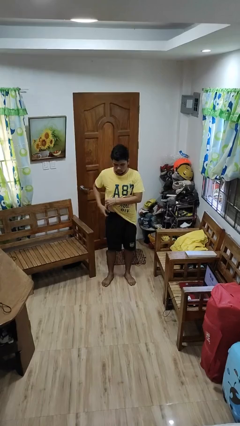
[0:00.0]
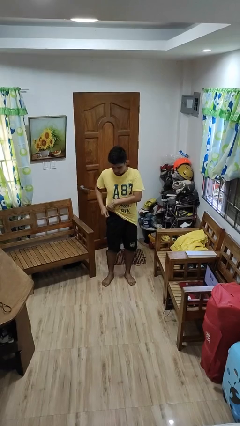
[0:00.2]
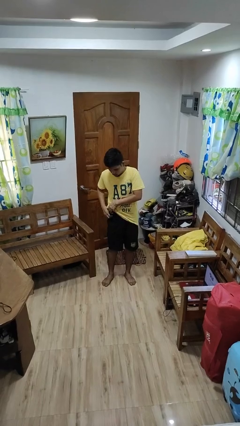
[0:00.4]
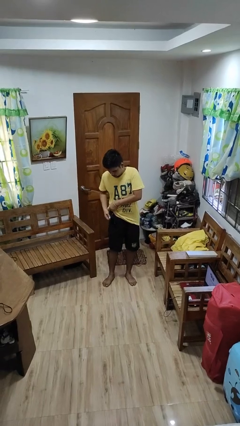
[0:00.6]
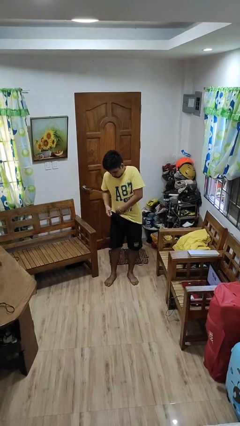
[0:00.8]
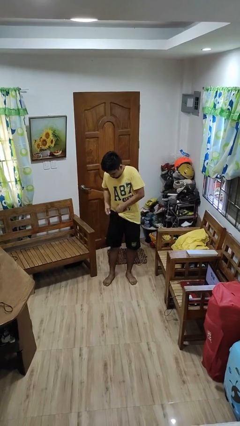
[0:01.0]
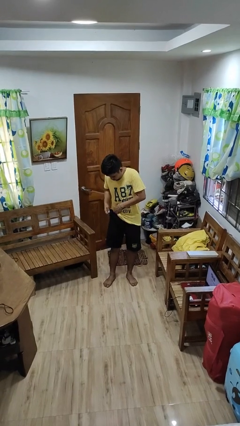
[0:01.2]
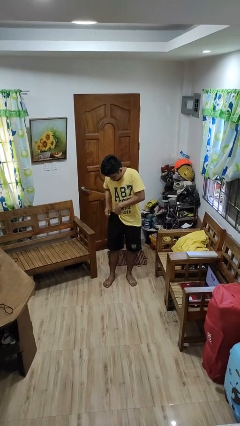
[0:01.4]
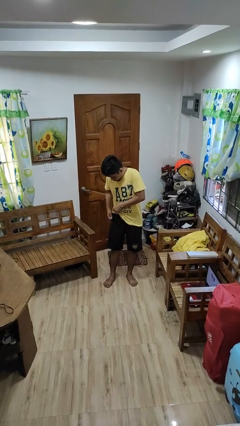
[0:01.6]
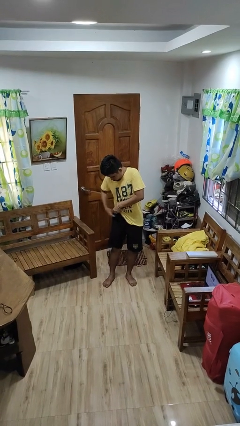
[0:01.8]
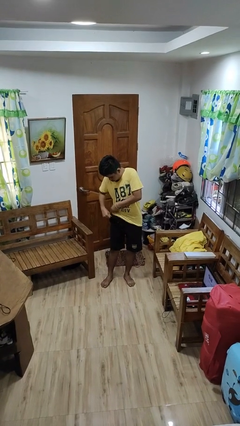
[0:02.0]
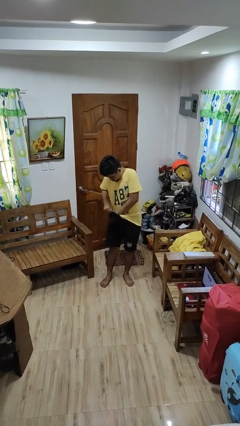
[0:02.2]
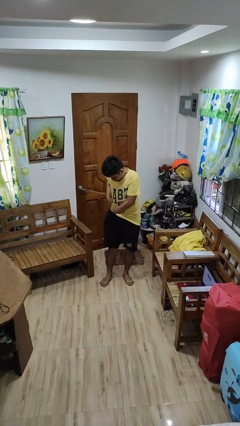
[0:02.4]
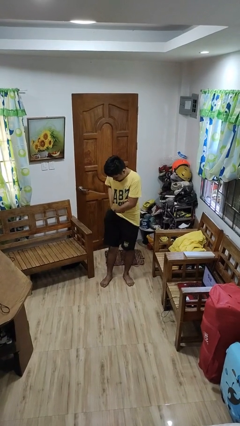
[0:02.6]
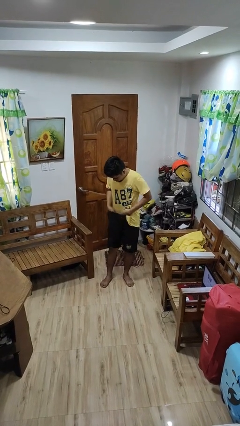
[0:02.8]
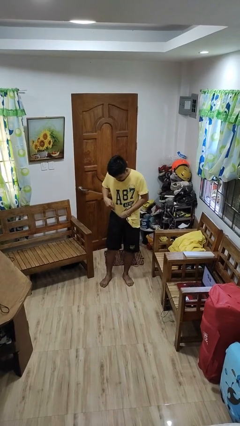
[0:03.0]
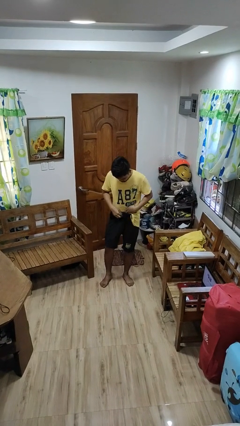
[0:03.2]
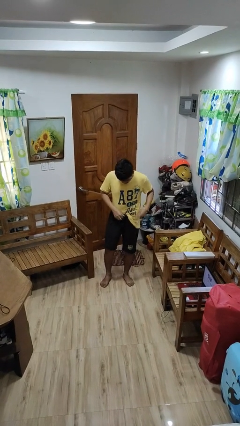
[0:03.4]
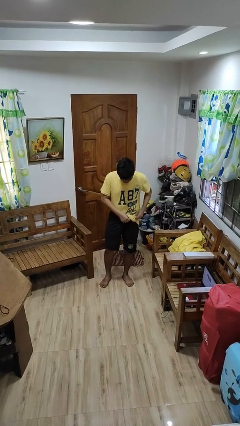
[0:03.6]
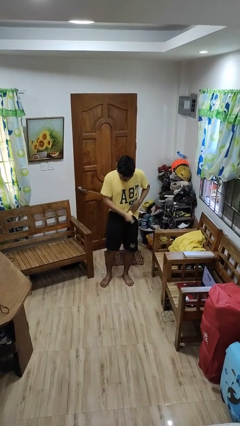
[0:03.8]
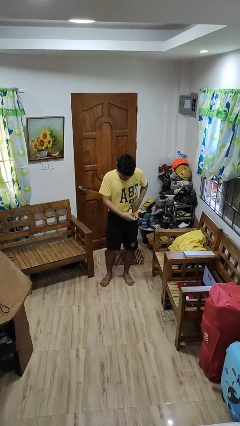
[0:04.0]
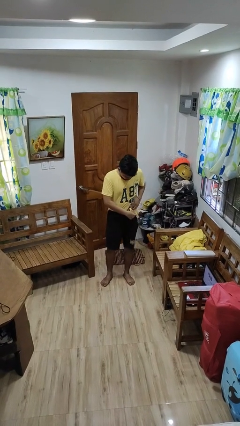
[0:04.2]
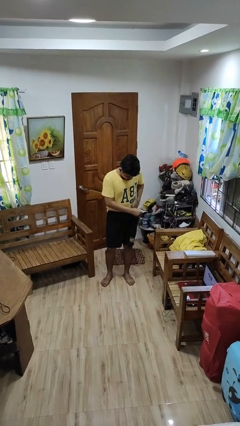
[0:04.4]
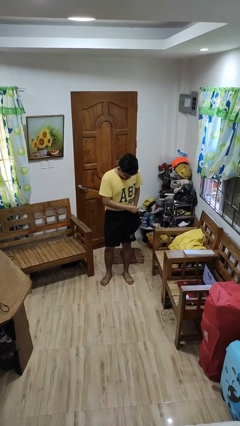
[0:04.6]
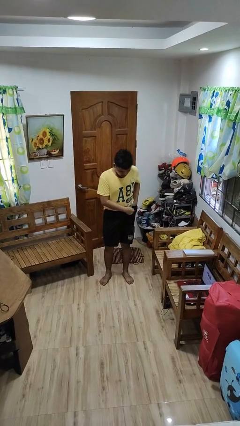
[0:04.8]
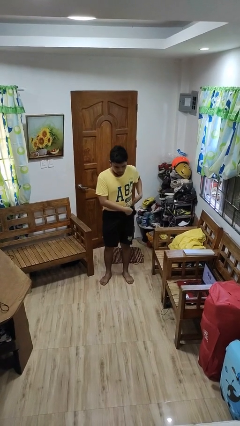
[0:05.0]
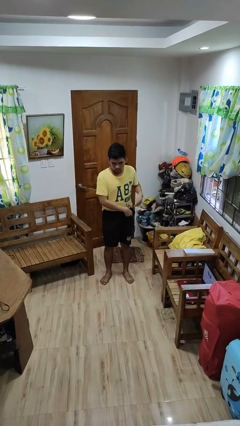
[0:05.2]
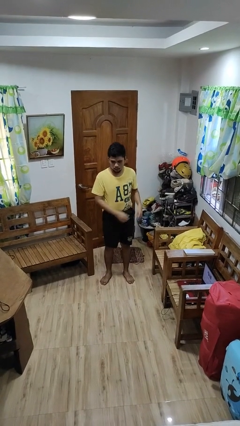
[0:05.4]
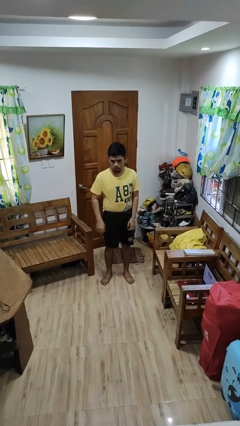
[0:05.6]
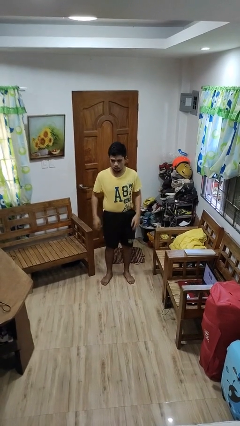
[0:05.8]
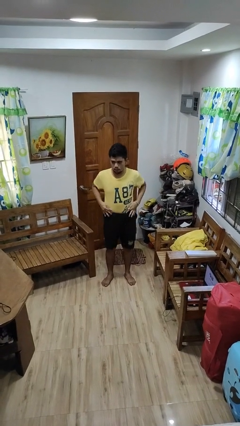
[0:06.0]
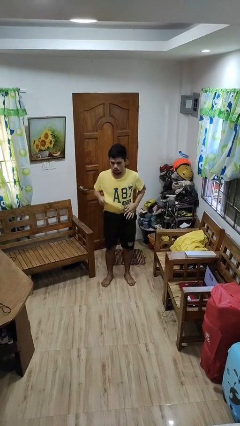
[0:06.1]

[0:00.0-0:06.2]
person tucks in shirt

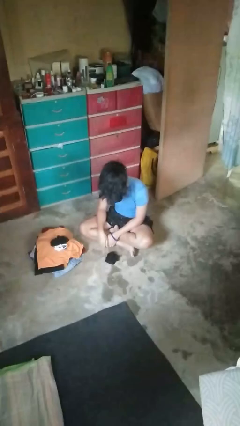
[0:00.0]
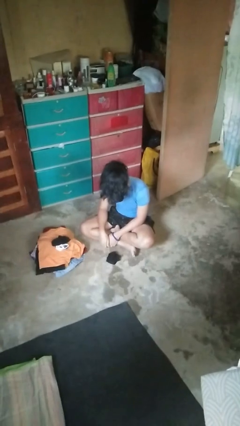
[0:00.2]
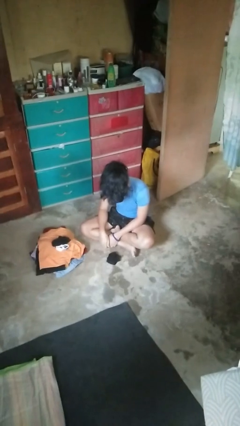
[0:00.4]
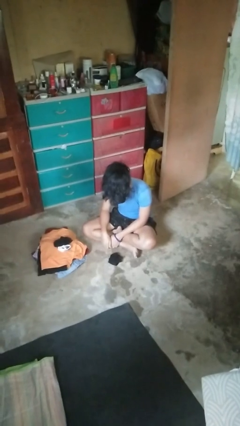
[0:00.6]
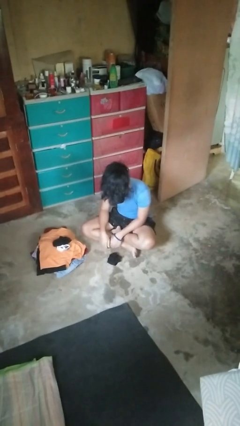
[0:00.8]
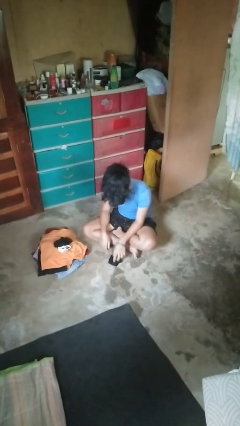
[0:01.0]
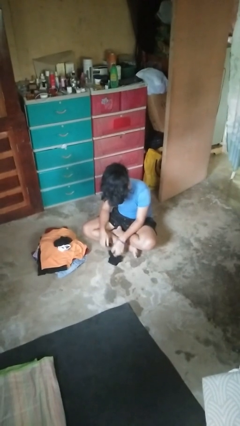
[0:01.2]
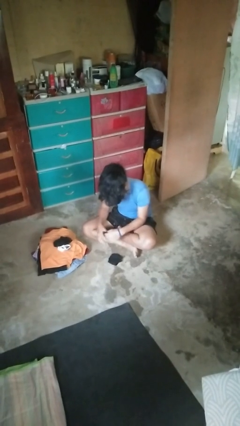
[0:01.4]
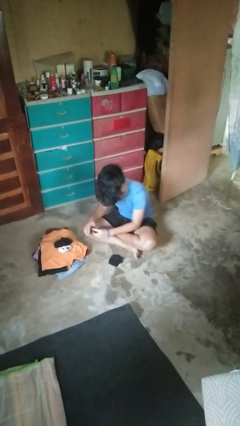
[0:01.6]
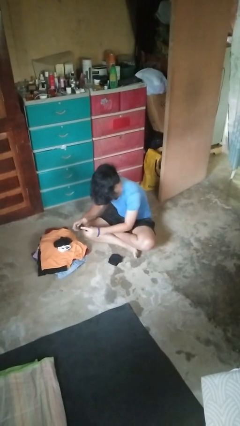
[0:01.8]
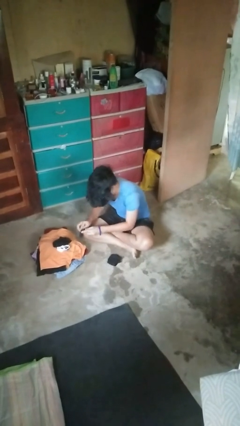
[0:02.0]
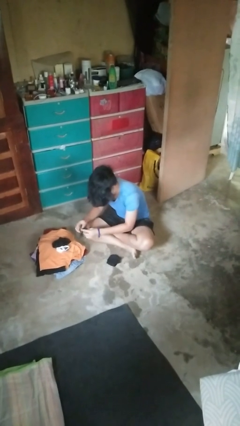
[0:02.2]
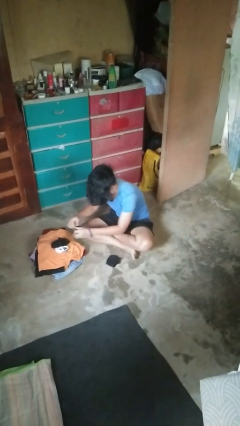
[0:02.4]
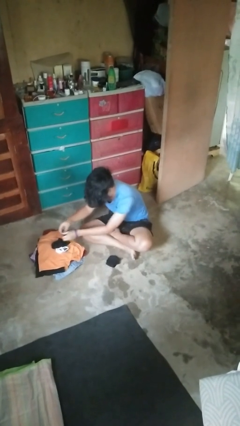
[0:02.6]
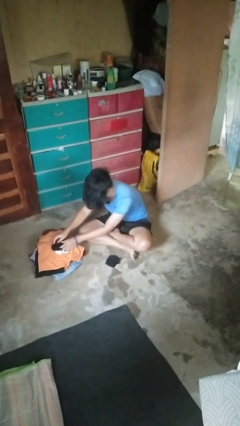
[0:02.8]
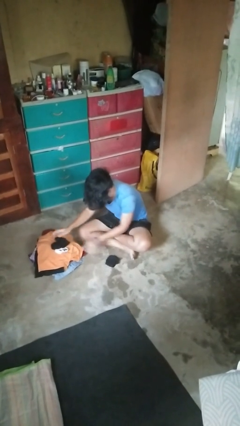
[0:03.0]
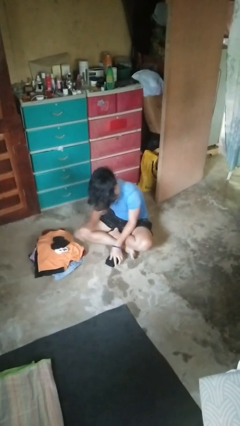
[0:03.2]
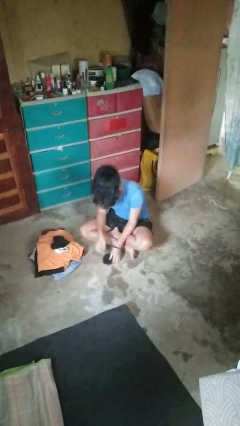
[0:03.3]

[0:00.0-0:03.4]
person folds socks

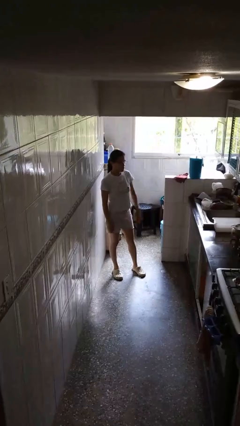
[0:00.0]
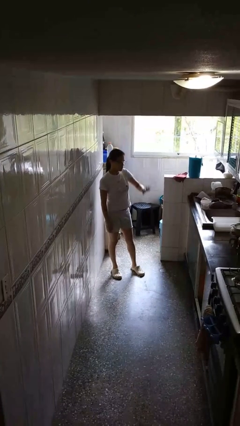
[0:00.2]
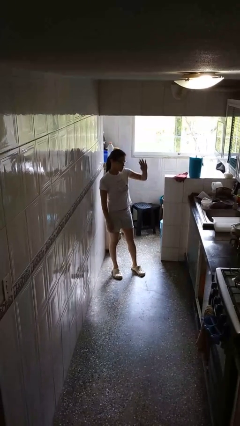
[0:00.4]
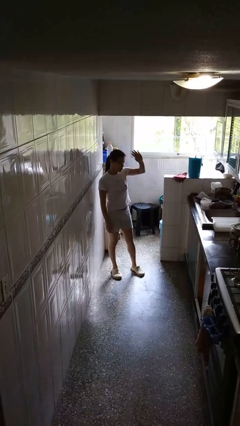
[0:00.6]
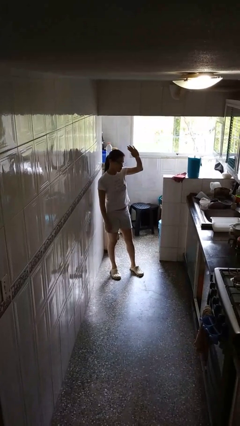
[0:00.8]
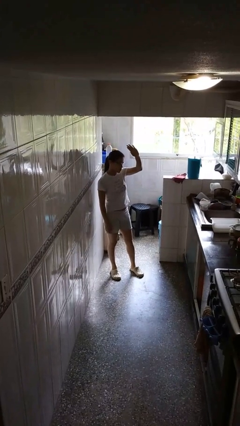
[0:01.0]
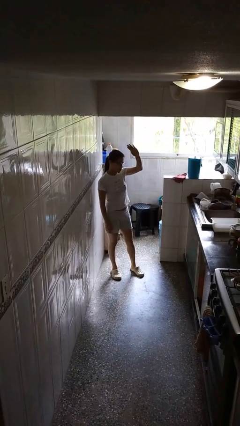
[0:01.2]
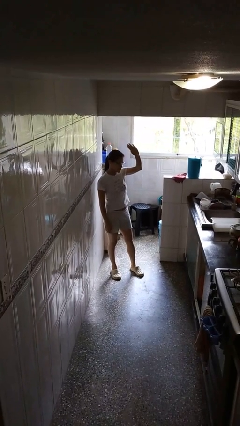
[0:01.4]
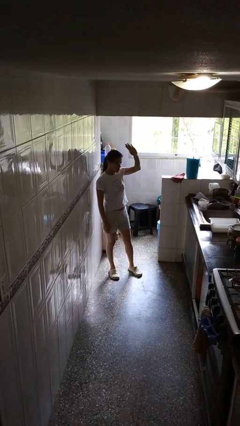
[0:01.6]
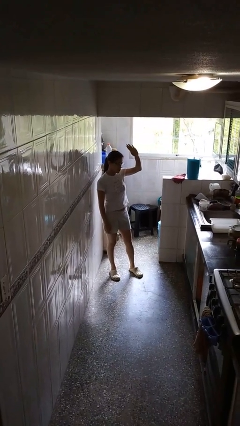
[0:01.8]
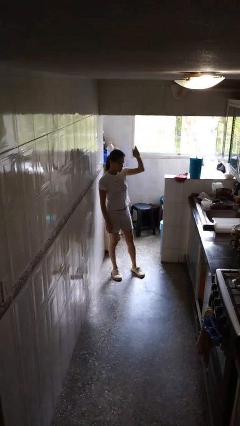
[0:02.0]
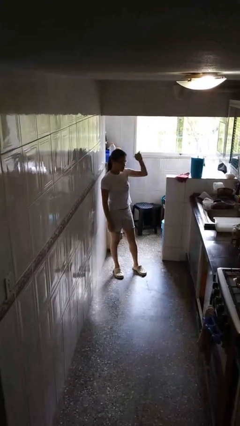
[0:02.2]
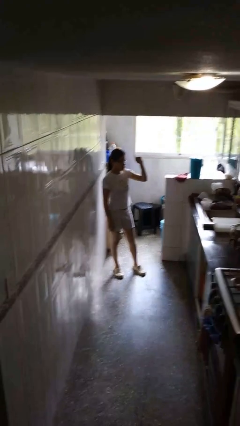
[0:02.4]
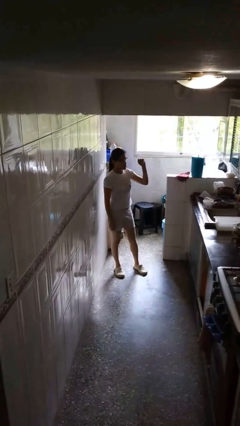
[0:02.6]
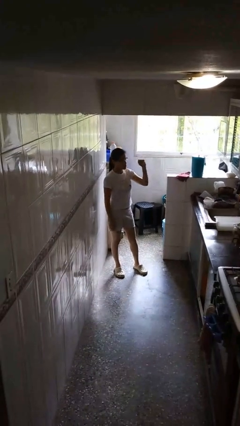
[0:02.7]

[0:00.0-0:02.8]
person gestures raise hand

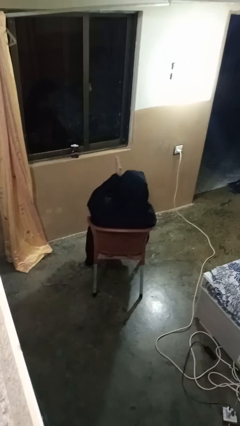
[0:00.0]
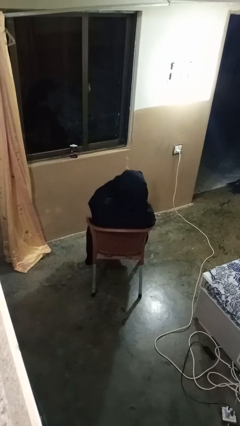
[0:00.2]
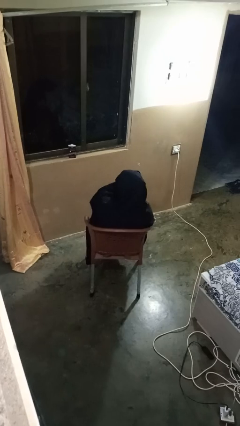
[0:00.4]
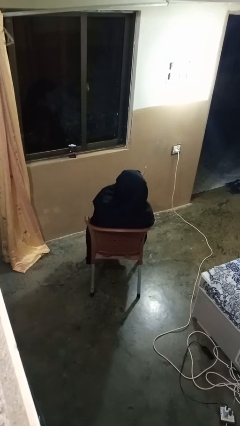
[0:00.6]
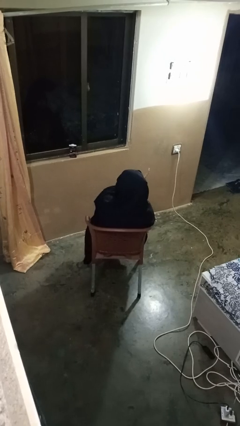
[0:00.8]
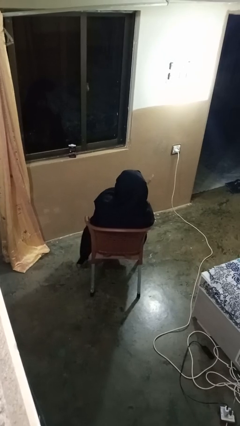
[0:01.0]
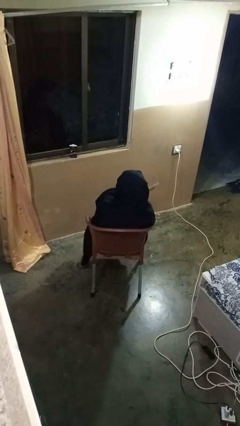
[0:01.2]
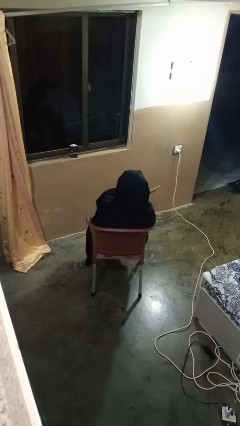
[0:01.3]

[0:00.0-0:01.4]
person gestures swipe right

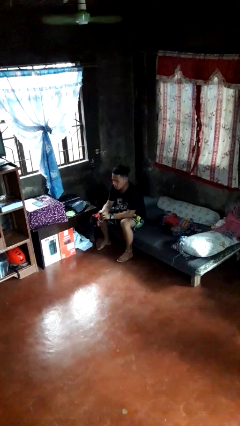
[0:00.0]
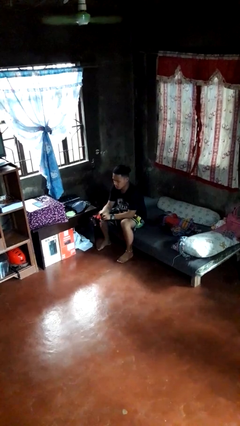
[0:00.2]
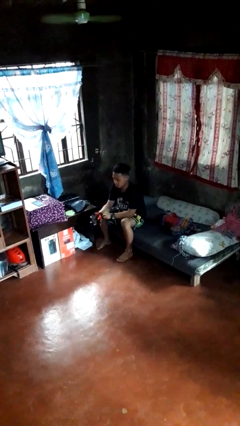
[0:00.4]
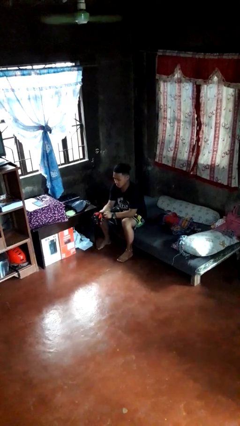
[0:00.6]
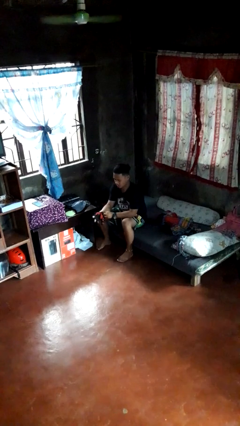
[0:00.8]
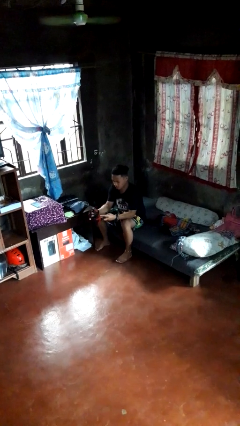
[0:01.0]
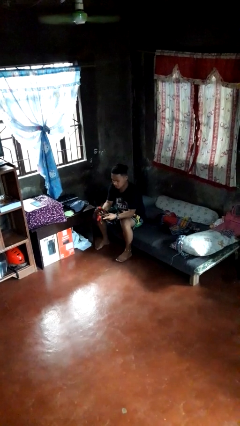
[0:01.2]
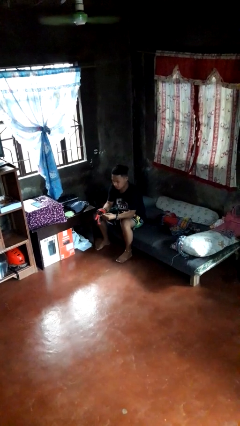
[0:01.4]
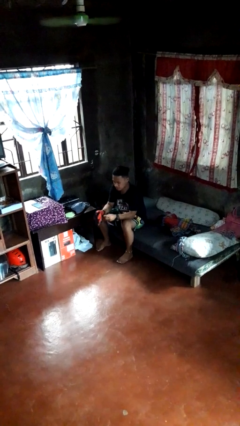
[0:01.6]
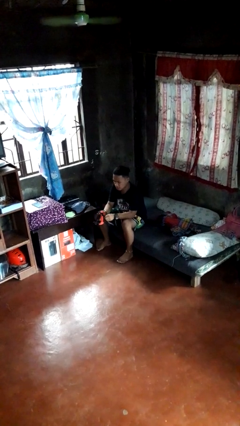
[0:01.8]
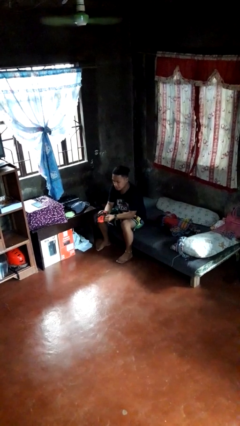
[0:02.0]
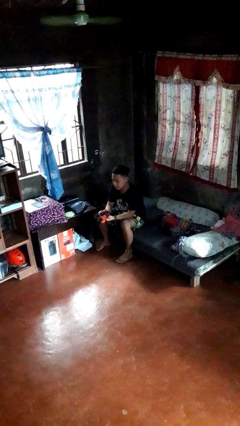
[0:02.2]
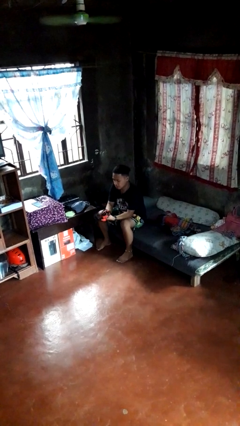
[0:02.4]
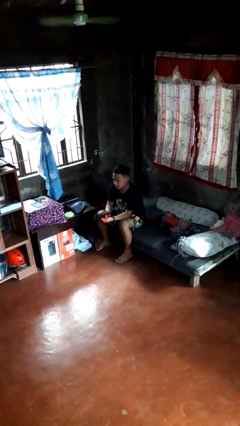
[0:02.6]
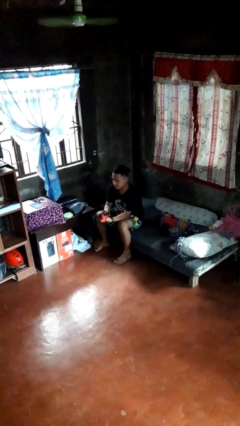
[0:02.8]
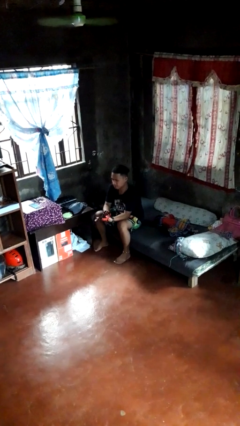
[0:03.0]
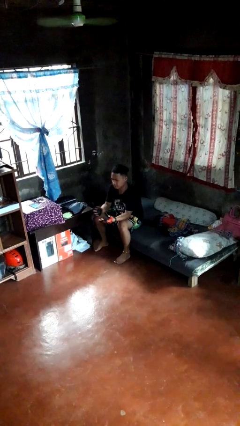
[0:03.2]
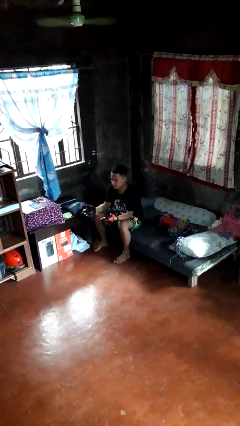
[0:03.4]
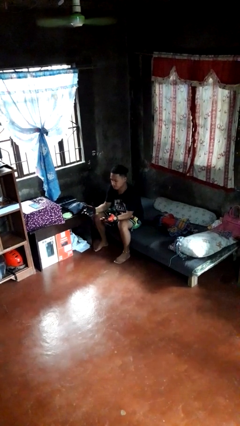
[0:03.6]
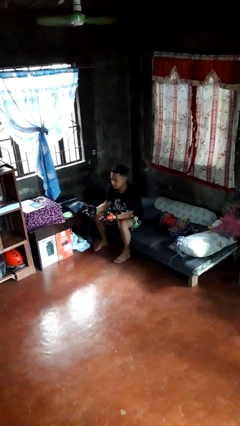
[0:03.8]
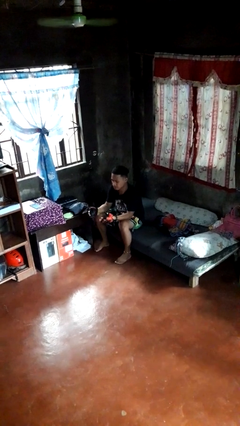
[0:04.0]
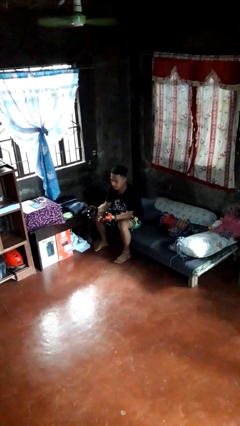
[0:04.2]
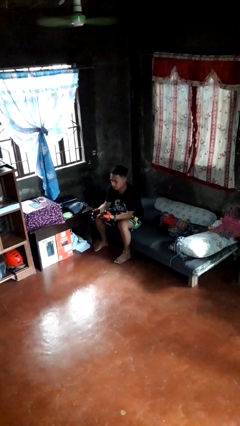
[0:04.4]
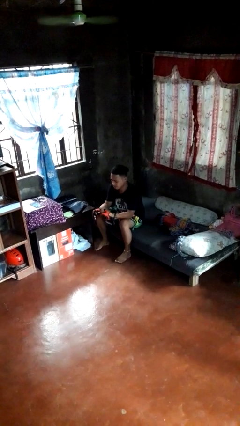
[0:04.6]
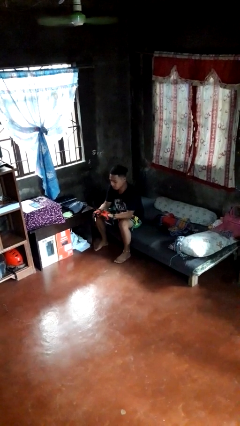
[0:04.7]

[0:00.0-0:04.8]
person puts on gloves
